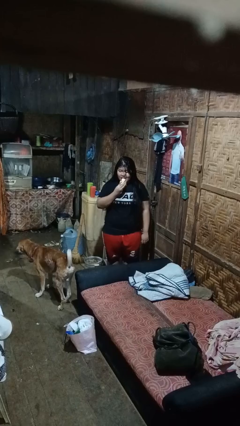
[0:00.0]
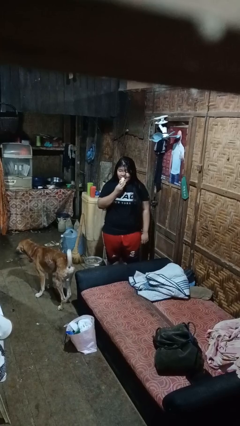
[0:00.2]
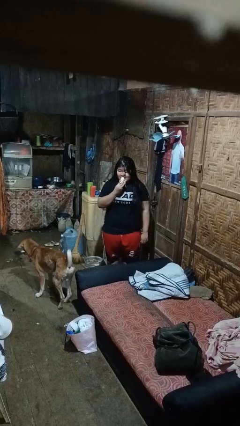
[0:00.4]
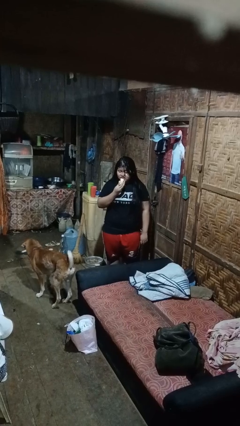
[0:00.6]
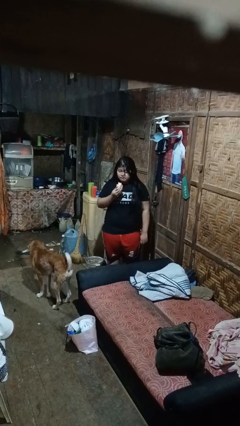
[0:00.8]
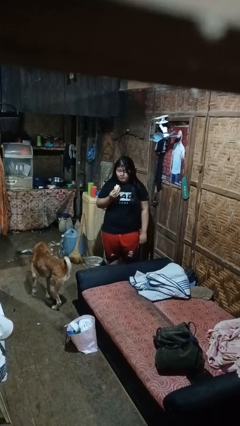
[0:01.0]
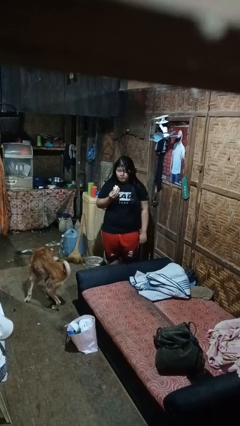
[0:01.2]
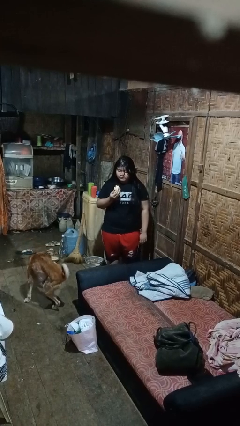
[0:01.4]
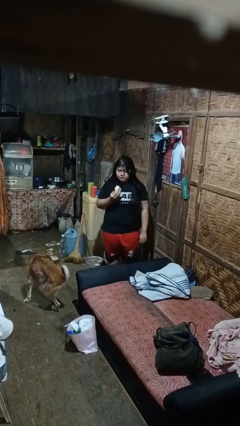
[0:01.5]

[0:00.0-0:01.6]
person eats banana

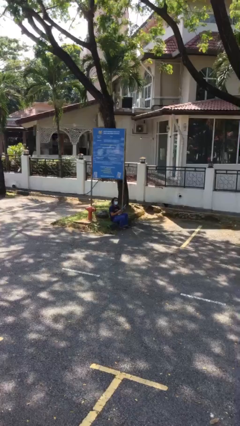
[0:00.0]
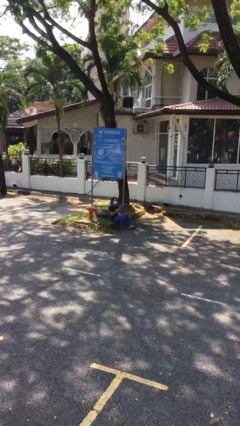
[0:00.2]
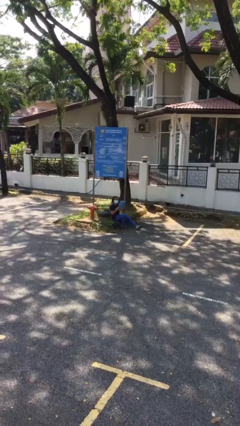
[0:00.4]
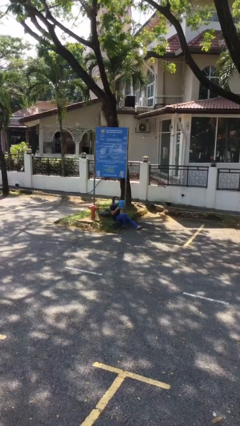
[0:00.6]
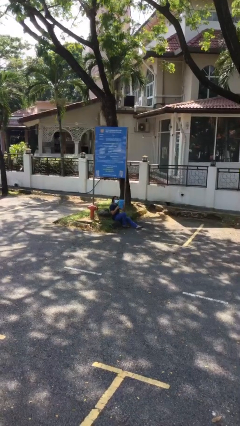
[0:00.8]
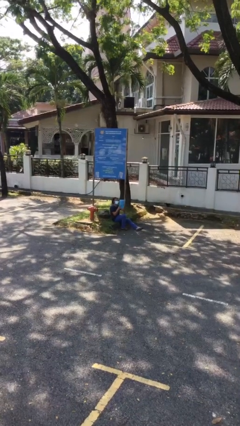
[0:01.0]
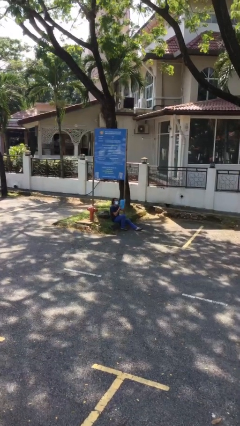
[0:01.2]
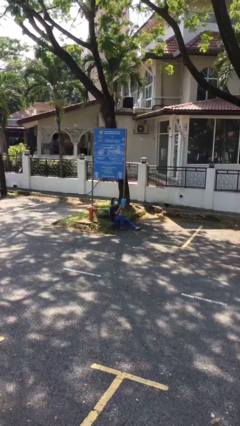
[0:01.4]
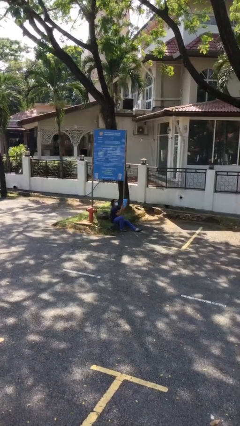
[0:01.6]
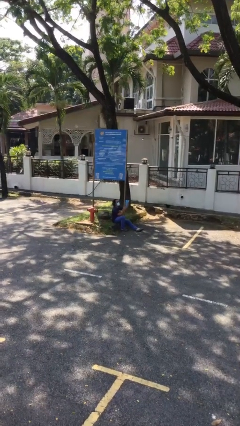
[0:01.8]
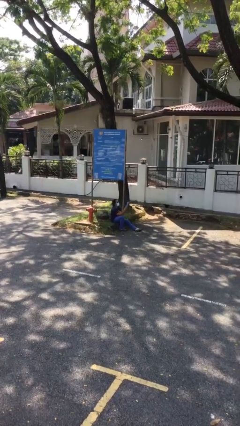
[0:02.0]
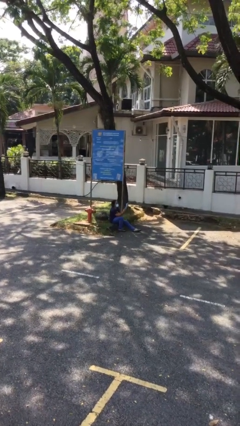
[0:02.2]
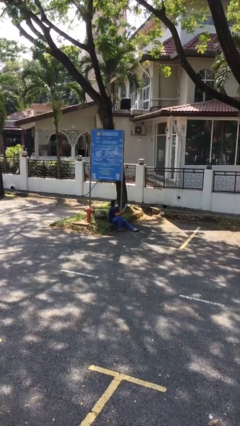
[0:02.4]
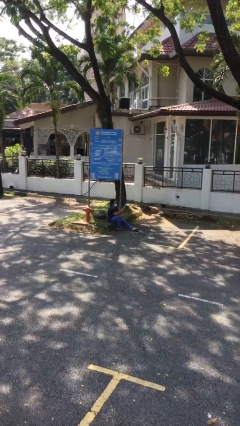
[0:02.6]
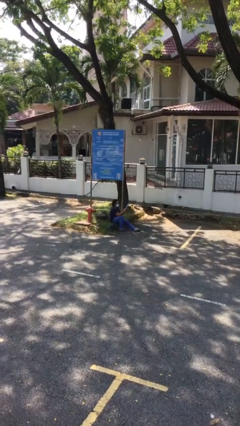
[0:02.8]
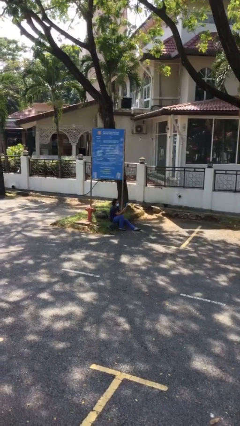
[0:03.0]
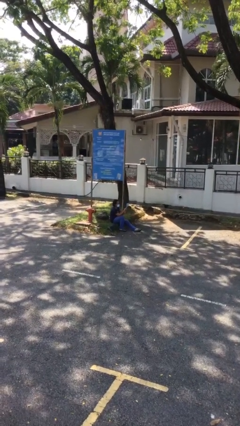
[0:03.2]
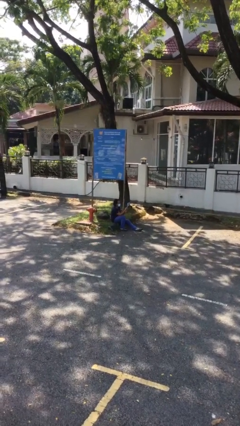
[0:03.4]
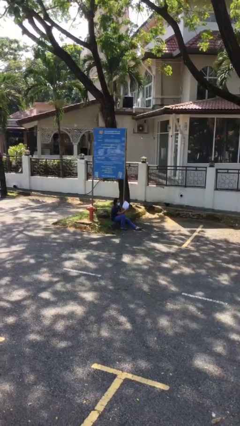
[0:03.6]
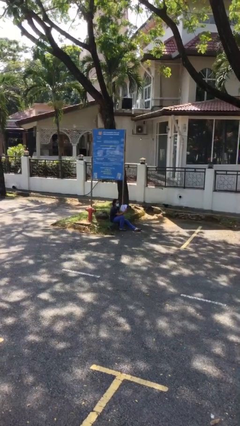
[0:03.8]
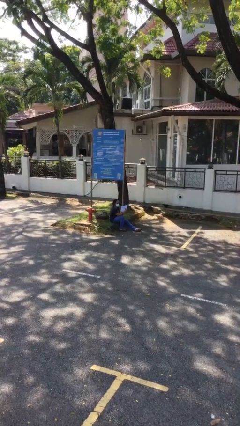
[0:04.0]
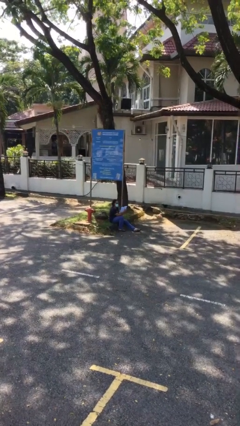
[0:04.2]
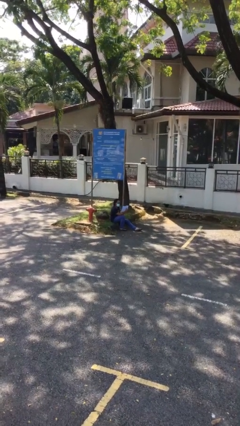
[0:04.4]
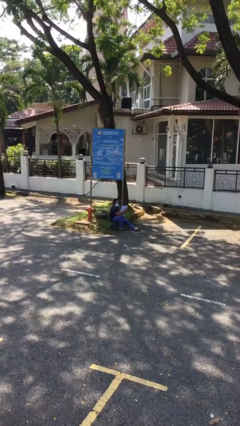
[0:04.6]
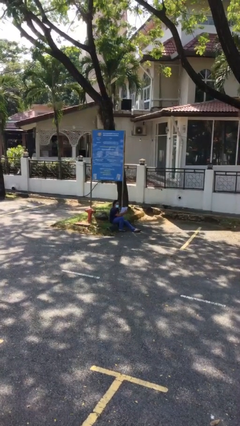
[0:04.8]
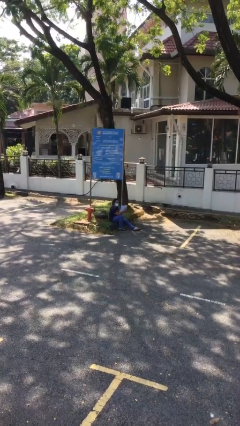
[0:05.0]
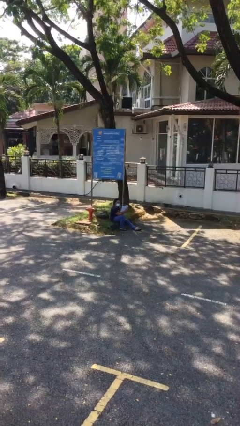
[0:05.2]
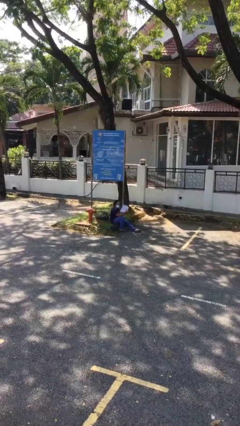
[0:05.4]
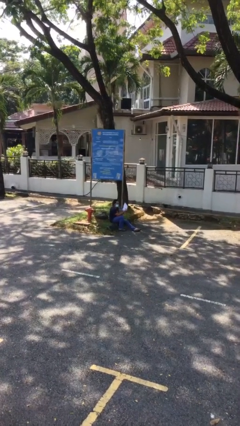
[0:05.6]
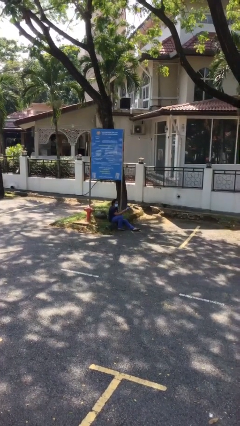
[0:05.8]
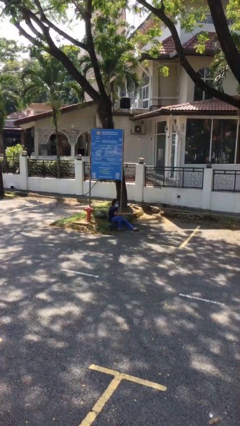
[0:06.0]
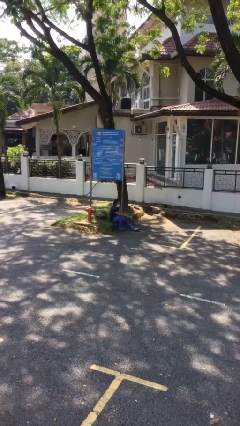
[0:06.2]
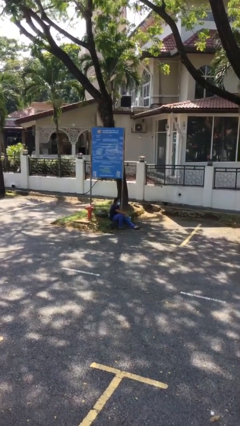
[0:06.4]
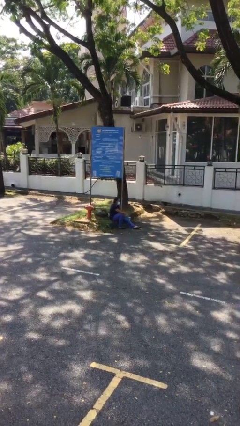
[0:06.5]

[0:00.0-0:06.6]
person reads document

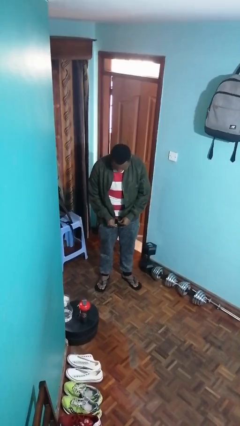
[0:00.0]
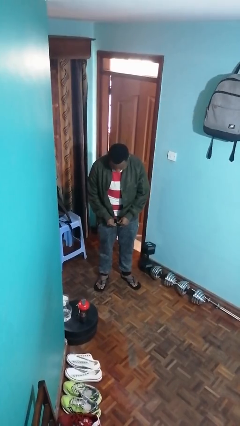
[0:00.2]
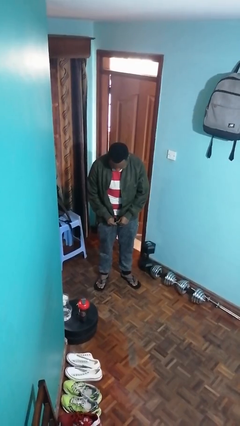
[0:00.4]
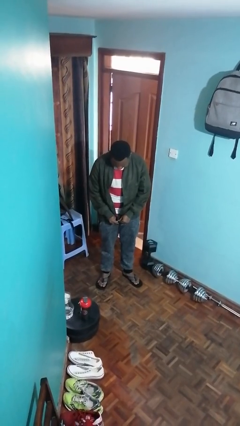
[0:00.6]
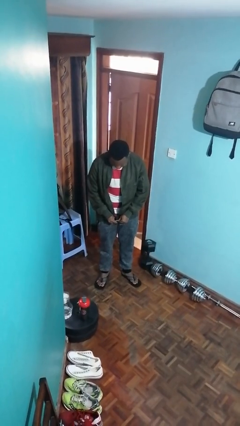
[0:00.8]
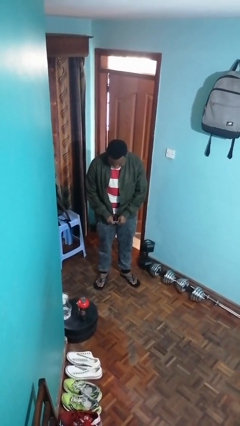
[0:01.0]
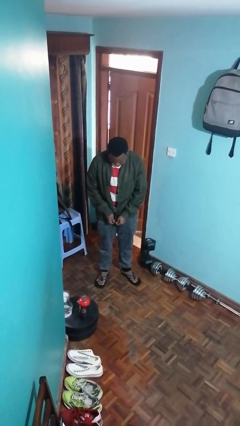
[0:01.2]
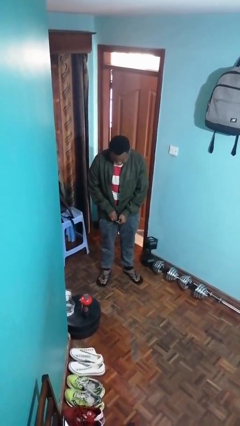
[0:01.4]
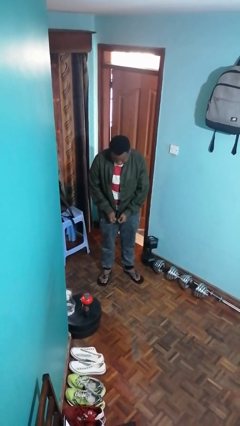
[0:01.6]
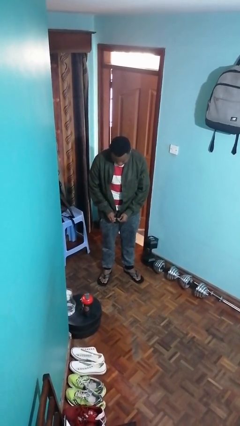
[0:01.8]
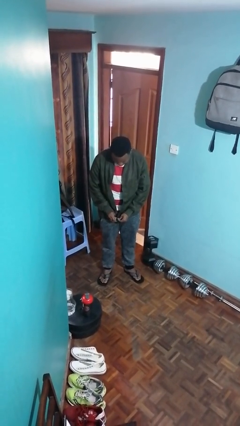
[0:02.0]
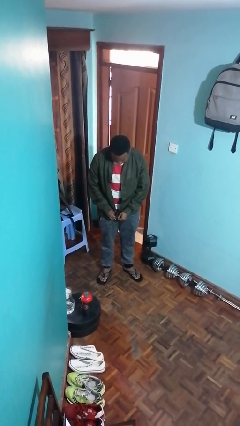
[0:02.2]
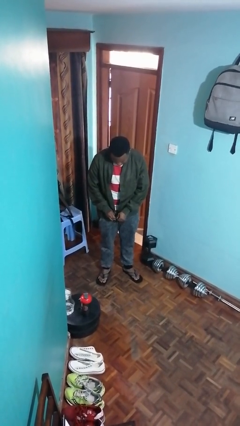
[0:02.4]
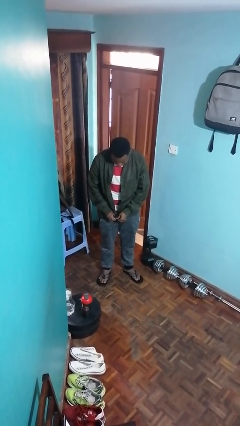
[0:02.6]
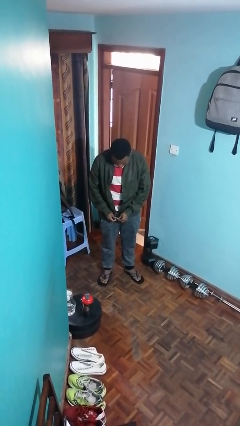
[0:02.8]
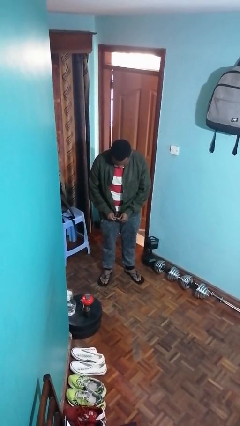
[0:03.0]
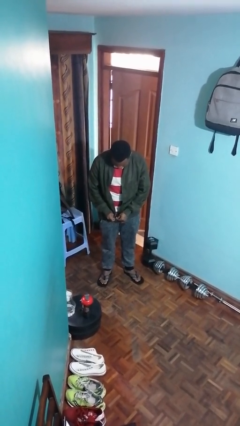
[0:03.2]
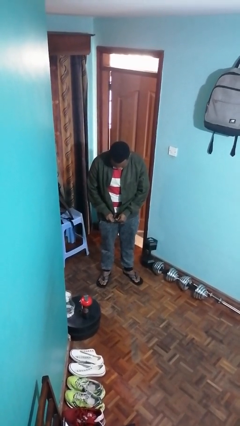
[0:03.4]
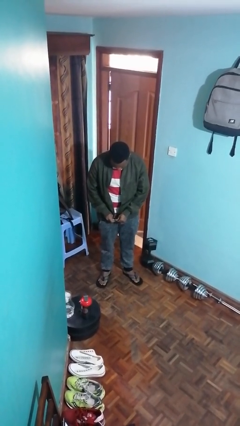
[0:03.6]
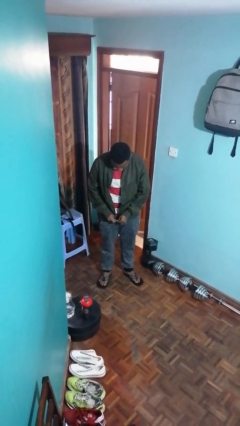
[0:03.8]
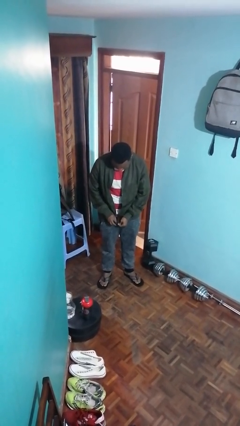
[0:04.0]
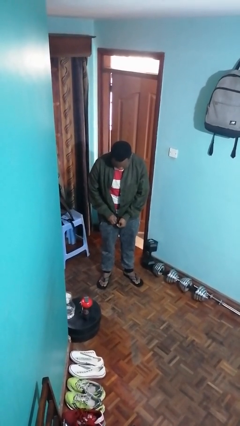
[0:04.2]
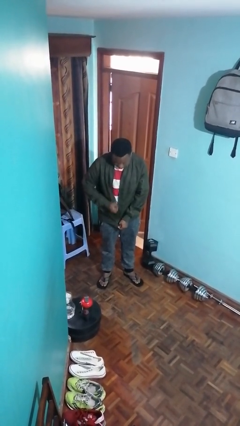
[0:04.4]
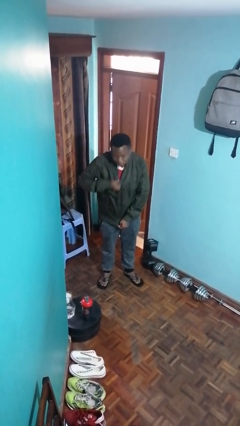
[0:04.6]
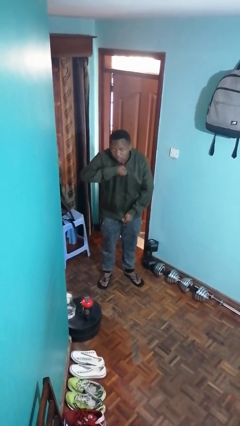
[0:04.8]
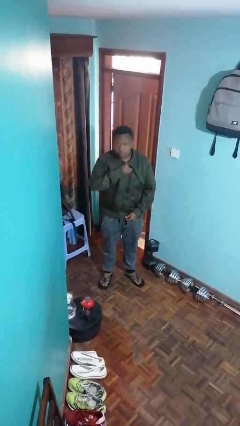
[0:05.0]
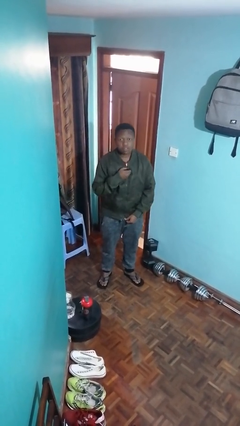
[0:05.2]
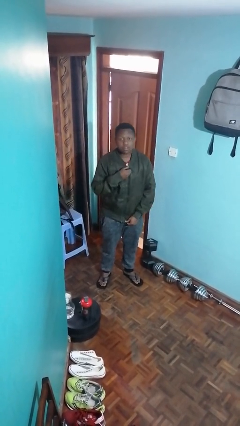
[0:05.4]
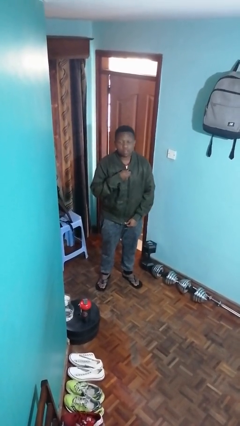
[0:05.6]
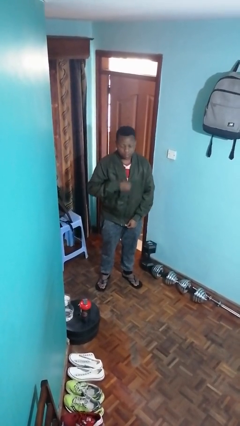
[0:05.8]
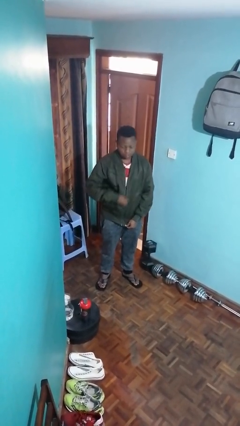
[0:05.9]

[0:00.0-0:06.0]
person zips up jacket

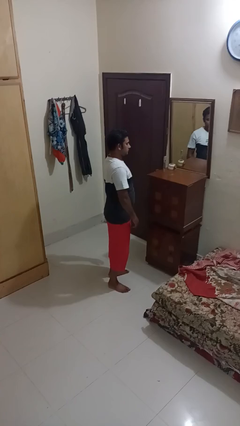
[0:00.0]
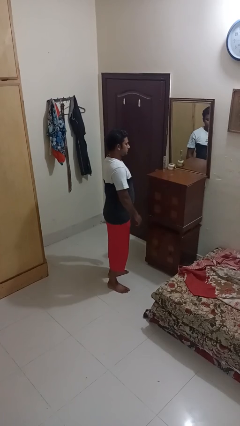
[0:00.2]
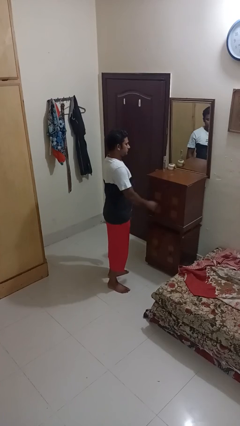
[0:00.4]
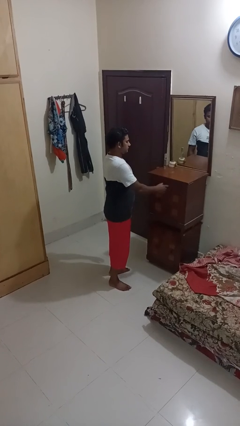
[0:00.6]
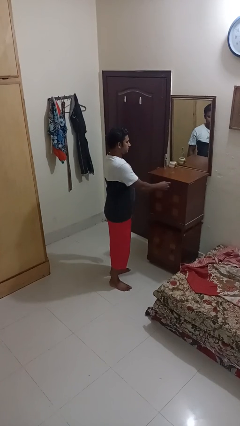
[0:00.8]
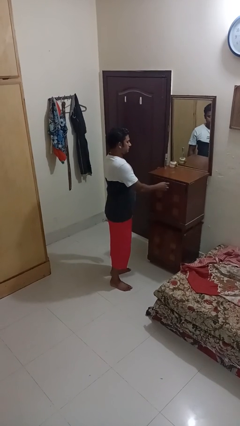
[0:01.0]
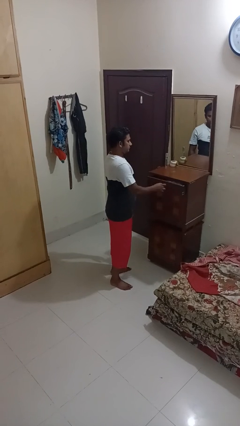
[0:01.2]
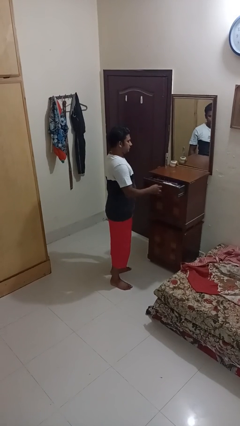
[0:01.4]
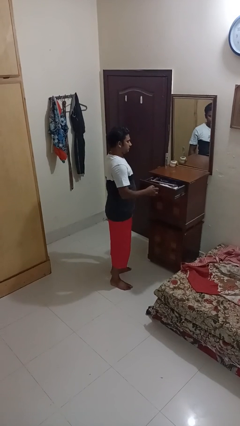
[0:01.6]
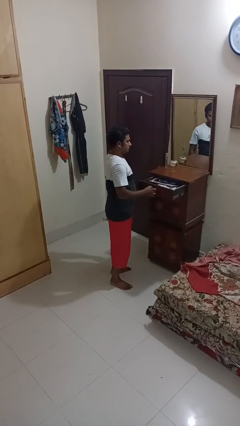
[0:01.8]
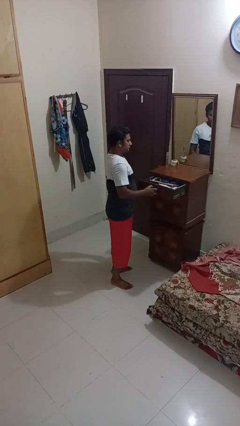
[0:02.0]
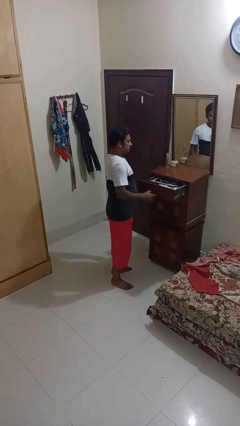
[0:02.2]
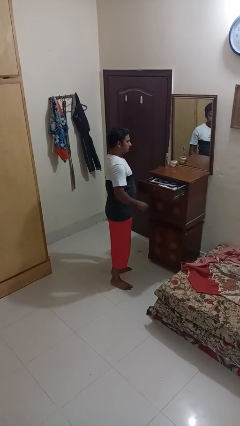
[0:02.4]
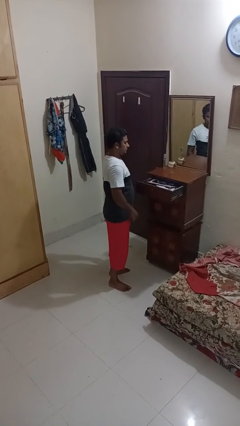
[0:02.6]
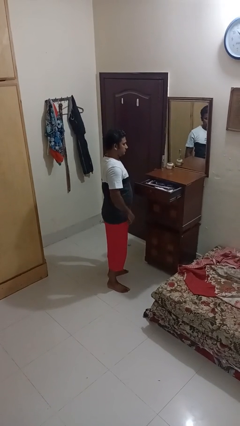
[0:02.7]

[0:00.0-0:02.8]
person opens dresser drawer

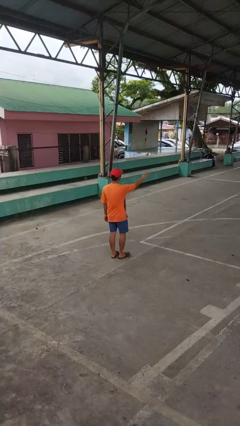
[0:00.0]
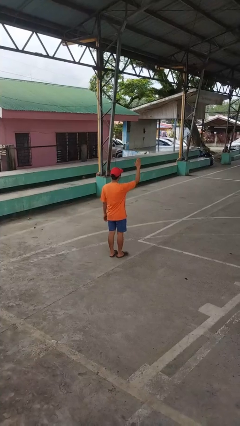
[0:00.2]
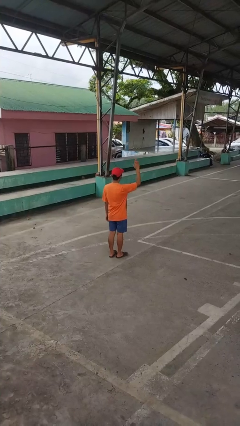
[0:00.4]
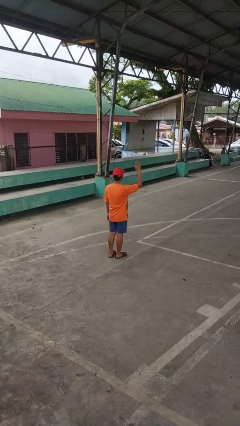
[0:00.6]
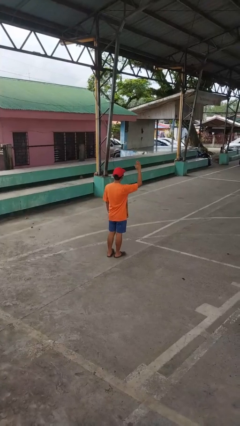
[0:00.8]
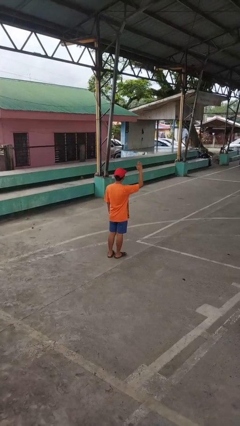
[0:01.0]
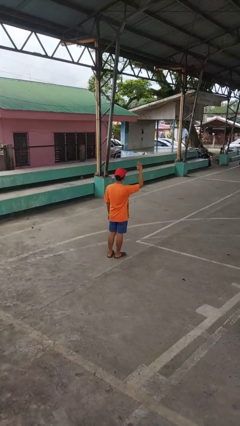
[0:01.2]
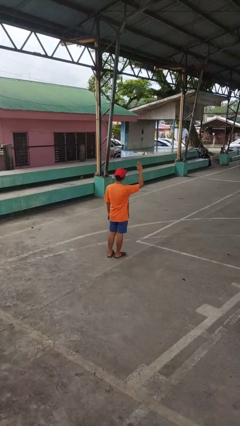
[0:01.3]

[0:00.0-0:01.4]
person gestures raise hand
